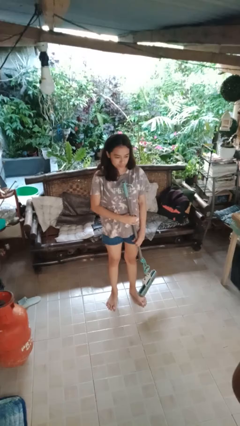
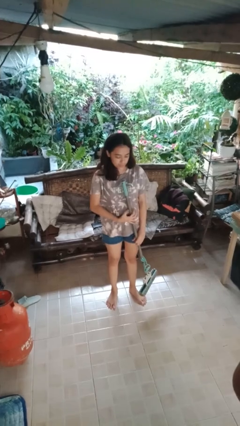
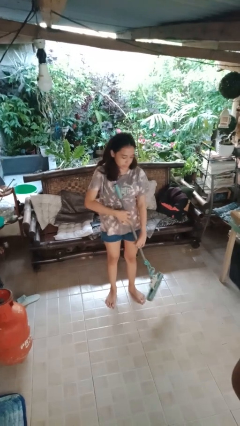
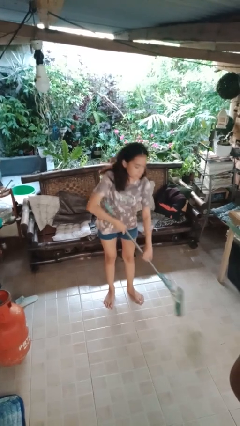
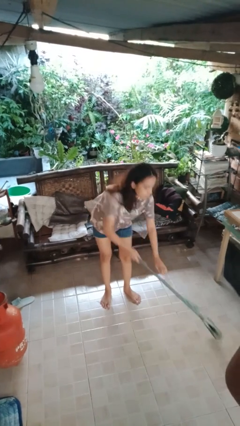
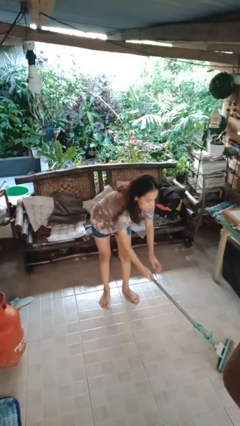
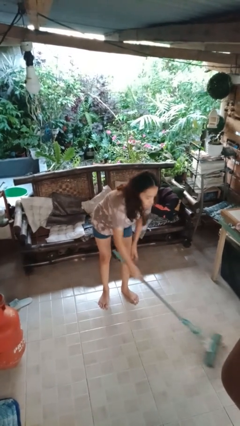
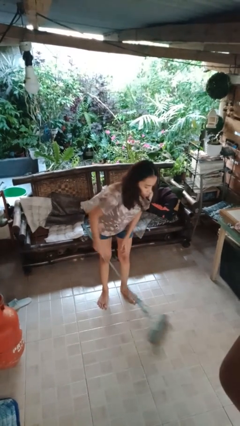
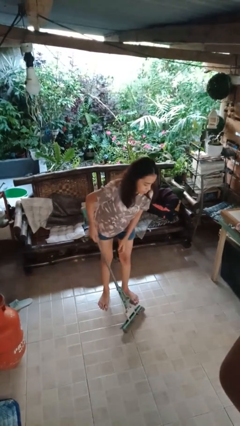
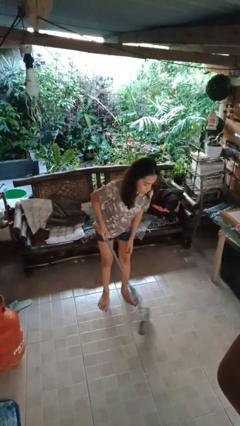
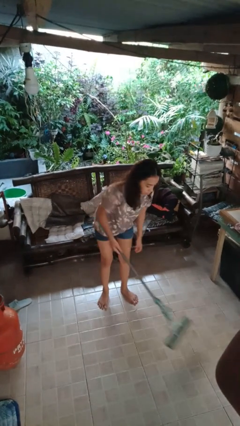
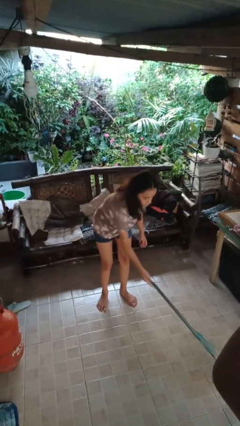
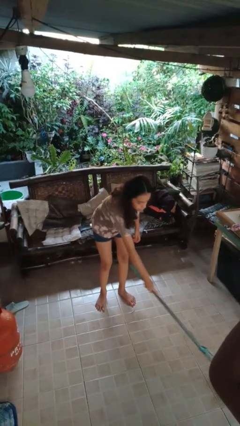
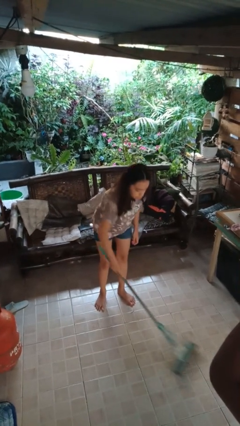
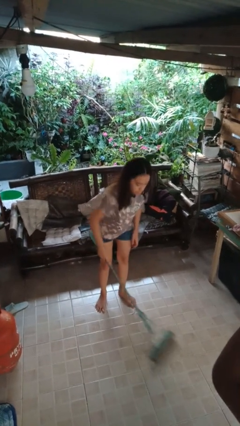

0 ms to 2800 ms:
person mops

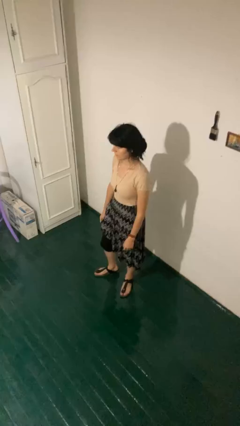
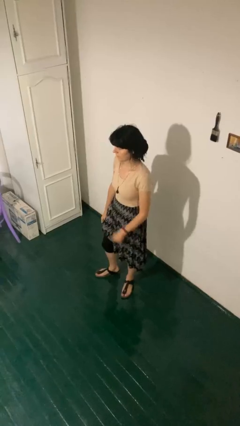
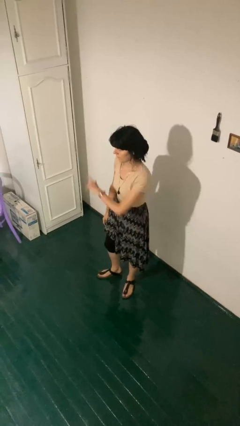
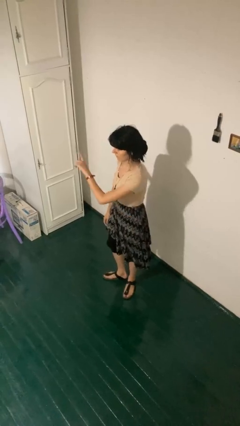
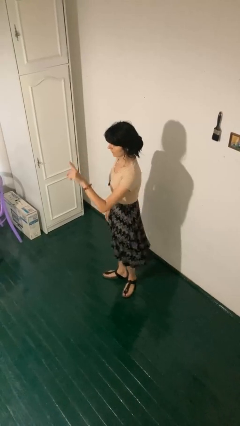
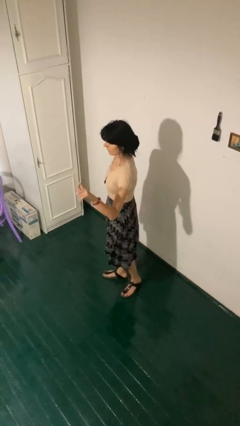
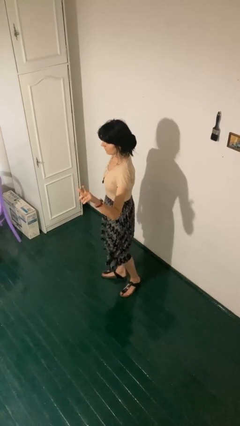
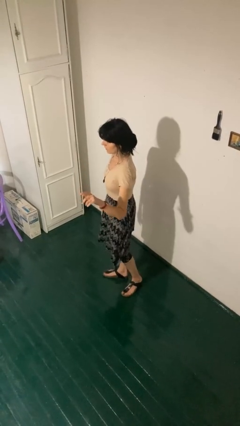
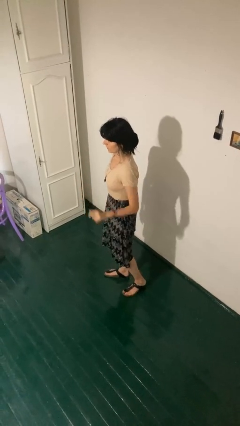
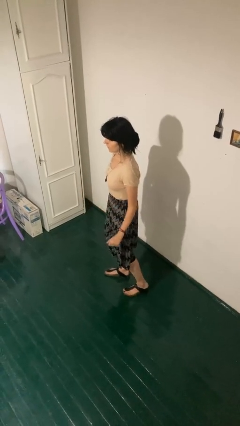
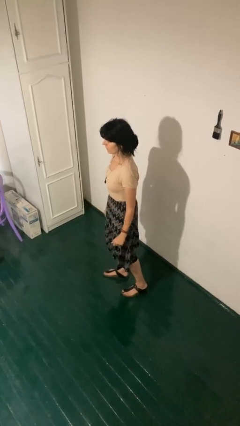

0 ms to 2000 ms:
person gestures swipe left

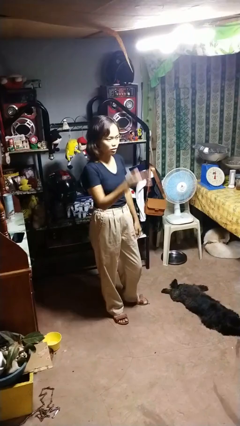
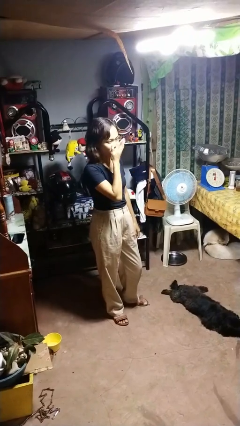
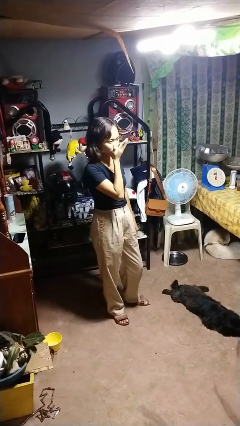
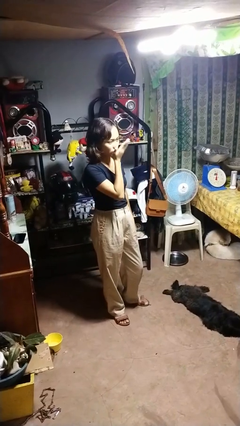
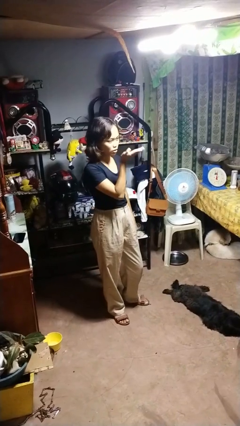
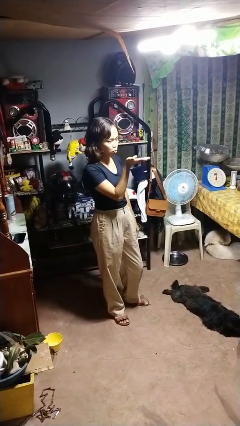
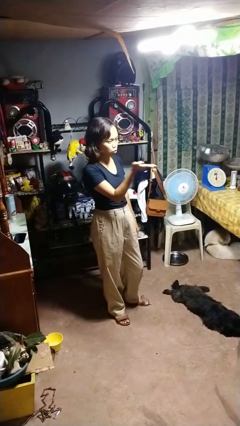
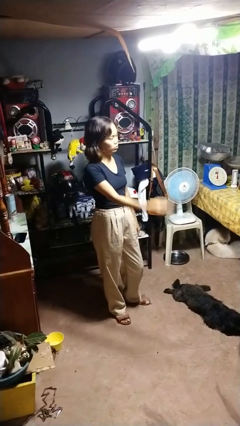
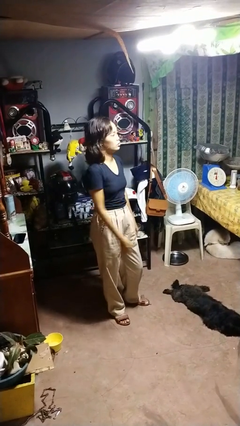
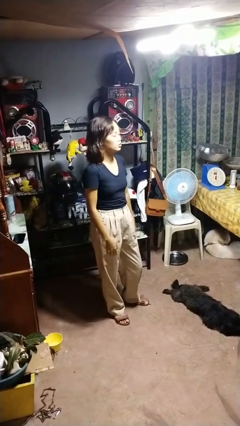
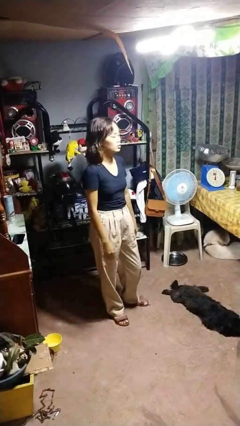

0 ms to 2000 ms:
person gestures blow kiss

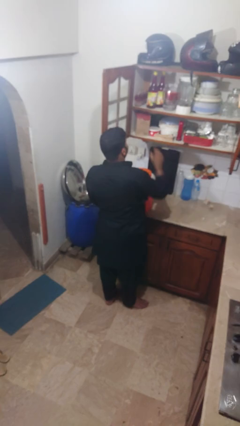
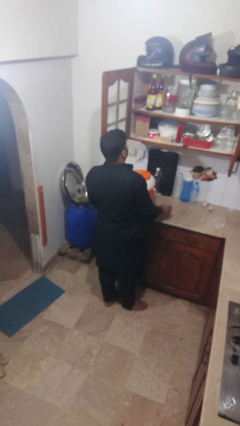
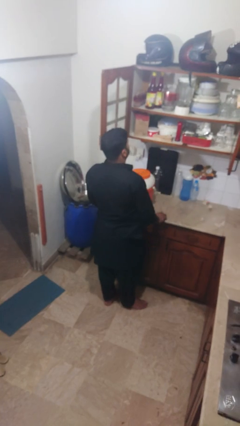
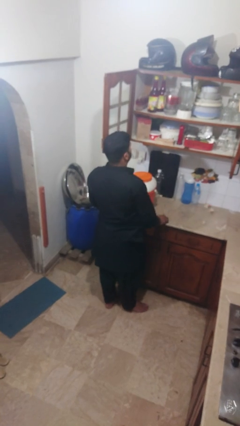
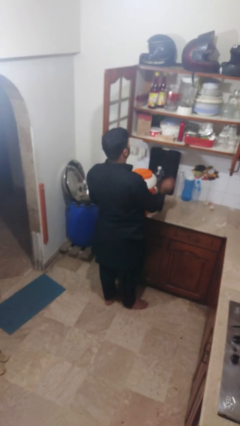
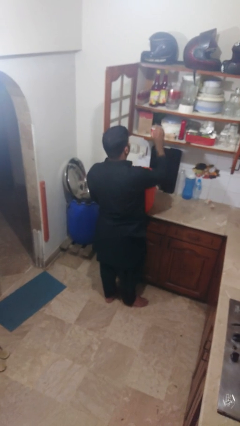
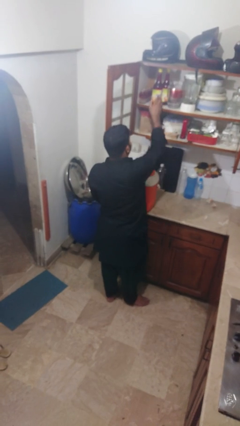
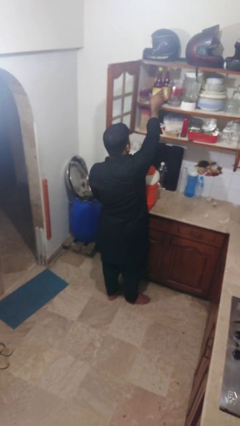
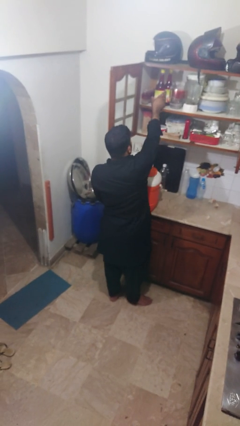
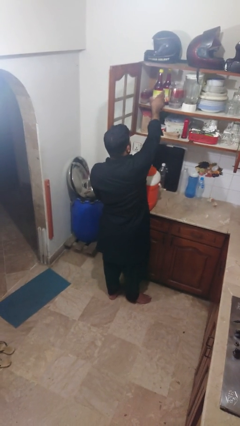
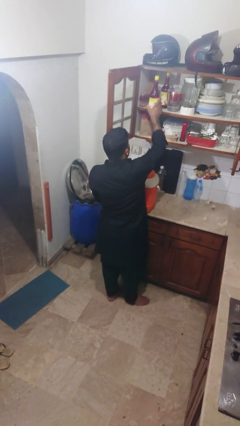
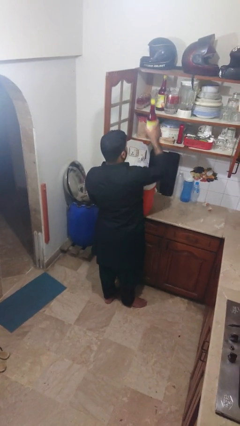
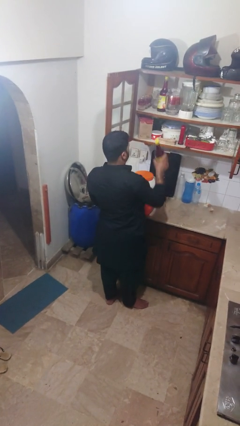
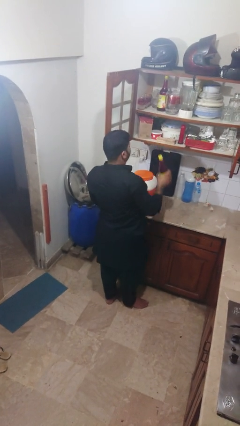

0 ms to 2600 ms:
person picks up object from cabinet

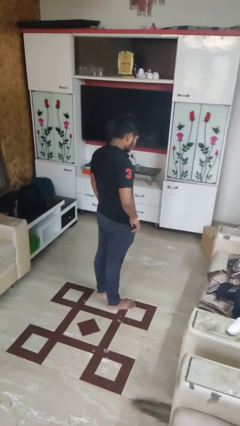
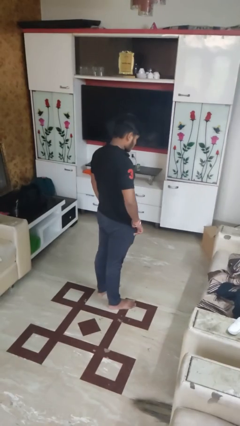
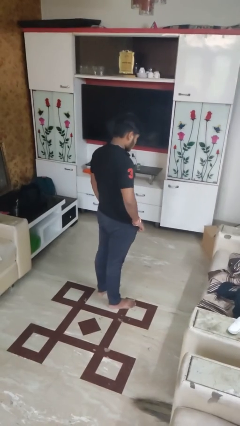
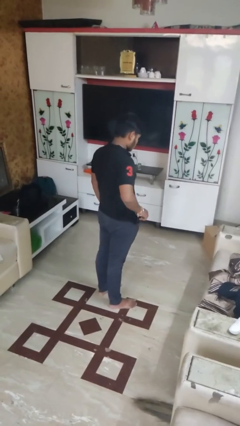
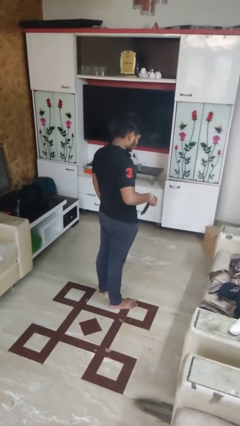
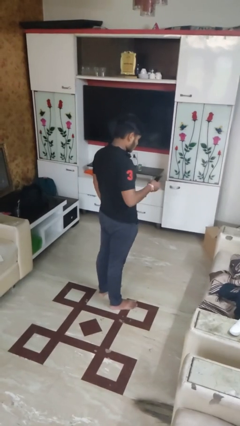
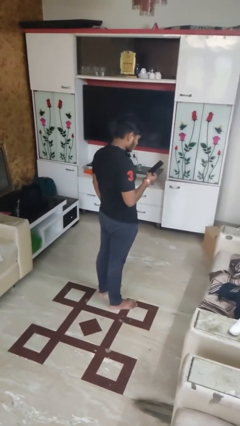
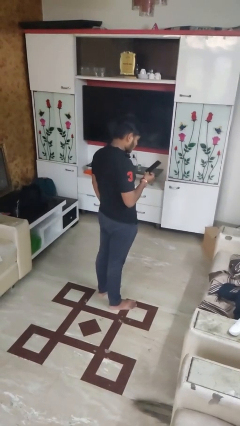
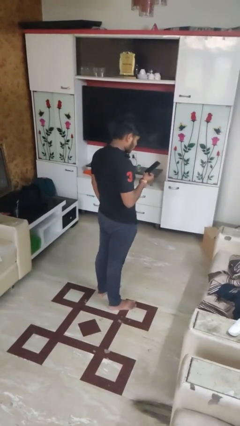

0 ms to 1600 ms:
person takes phone from pocket

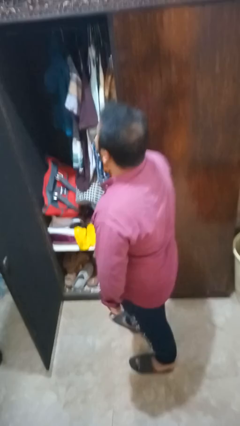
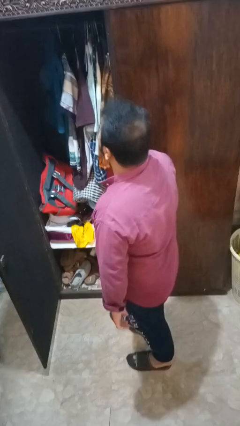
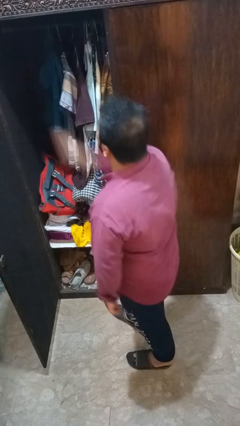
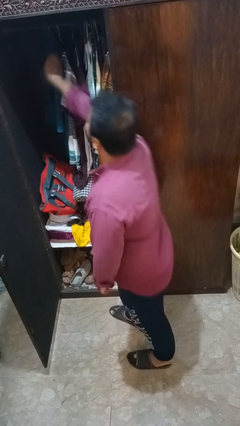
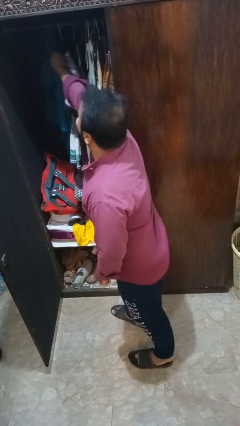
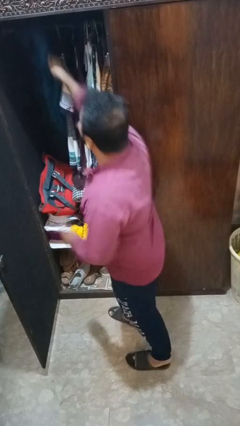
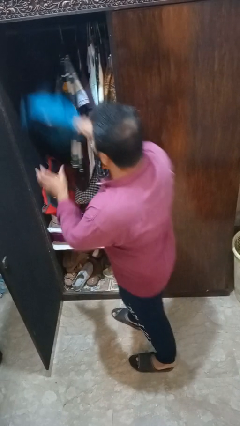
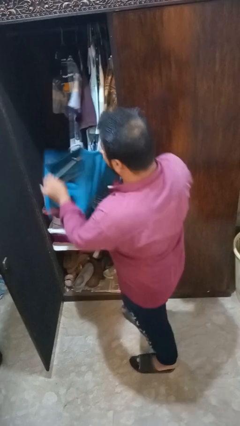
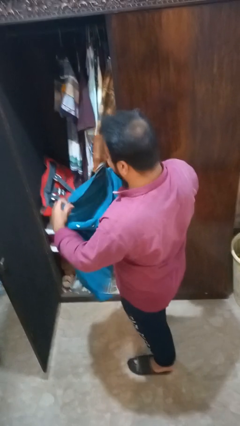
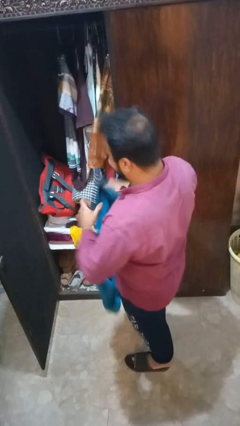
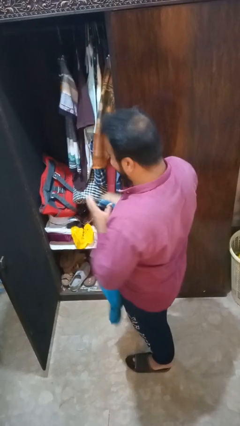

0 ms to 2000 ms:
person takes clothes from closet

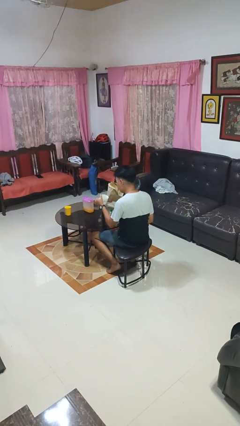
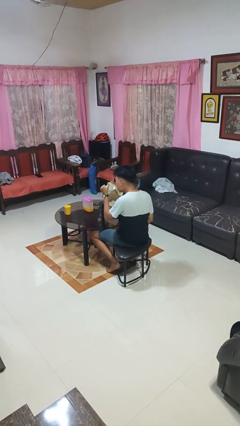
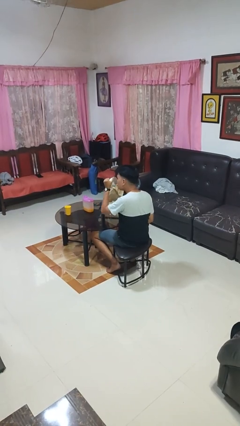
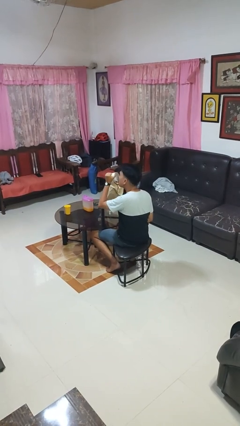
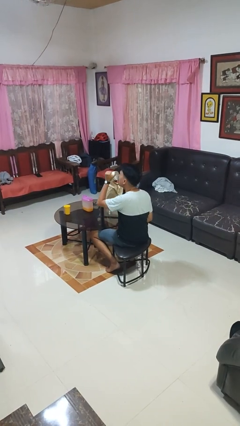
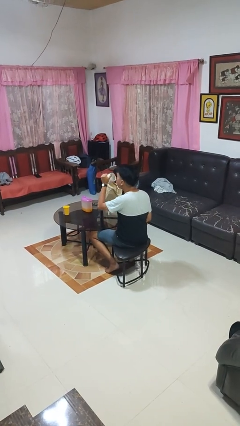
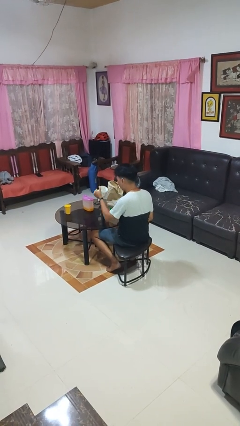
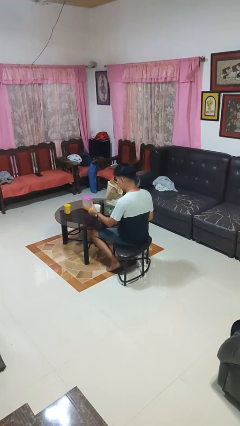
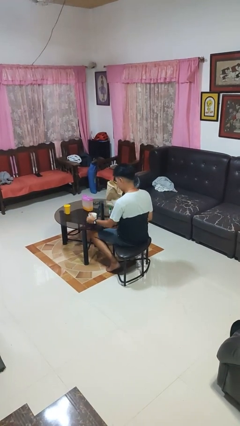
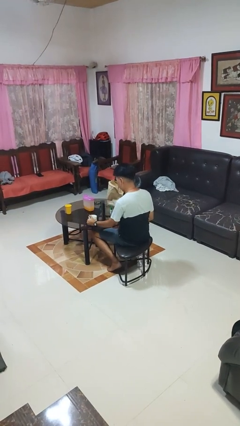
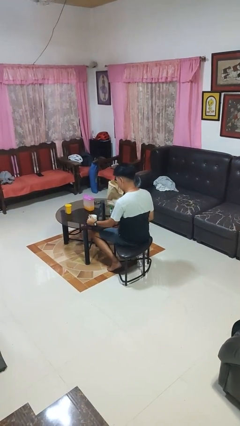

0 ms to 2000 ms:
person drinks from mug

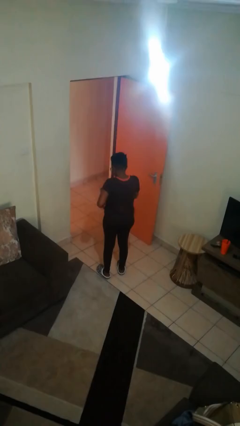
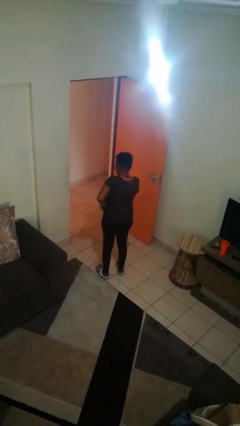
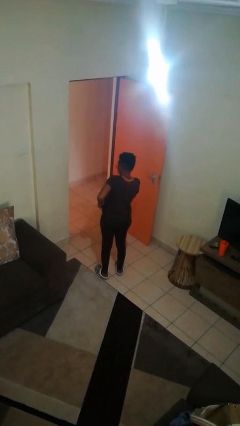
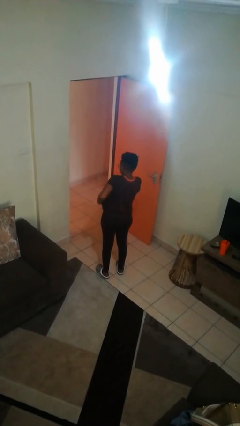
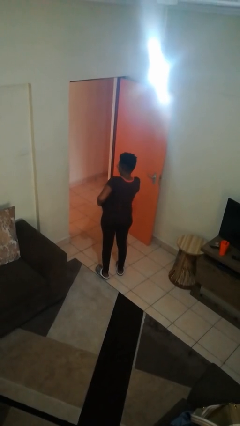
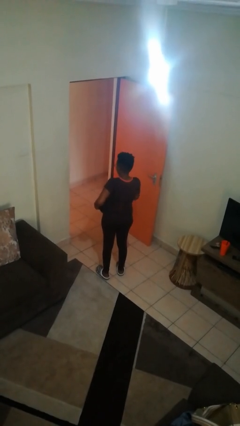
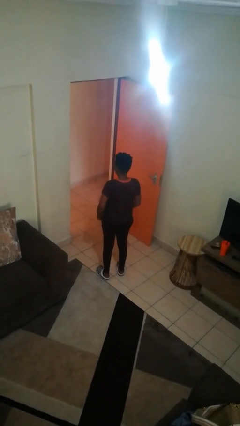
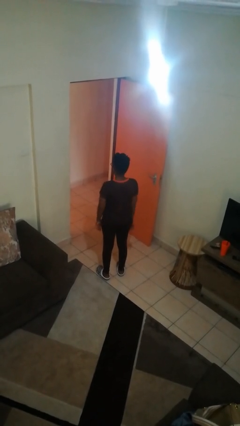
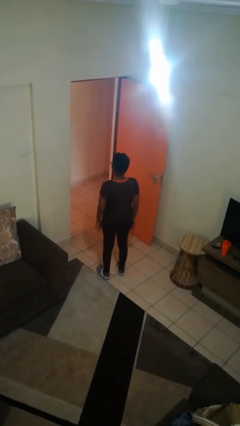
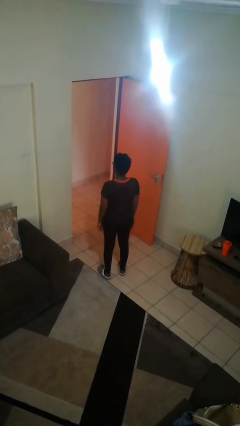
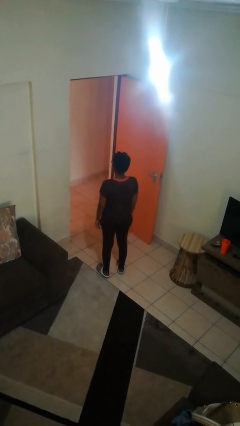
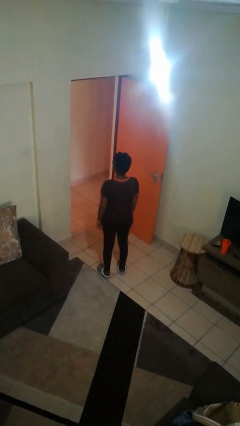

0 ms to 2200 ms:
person puts phone into pocket
